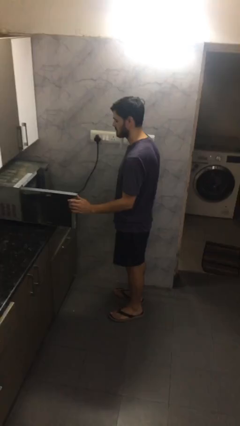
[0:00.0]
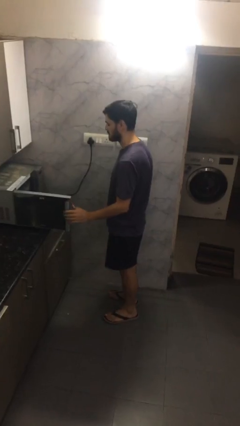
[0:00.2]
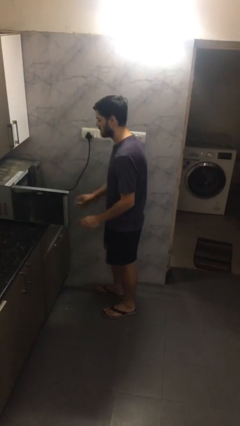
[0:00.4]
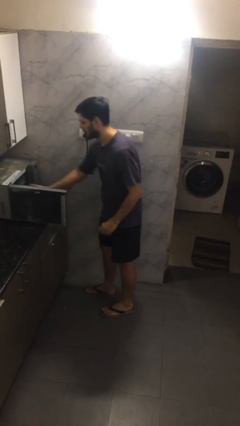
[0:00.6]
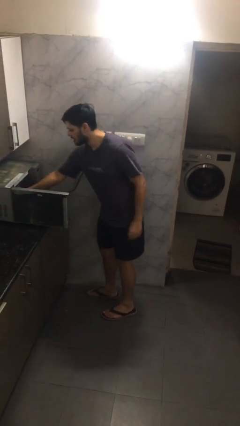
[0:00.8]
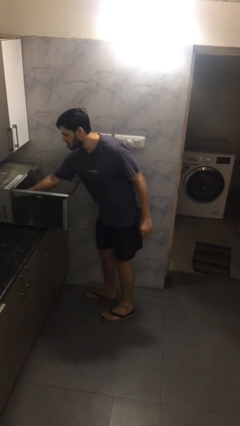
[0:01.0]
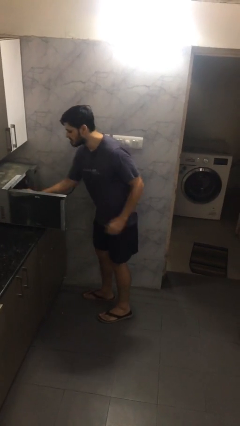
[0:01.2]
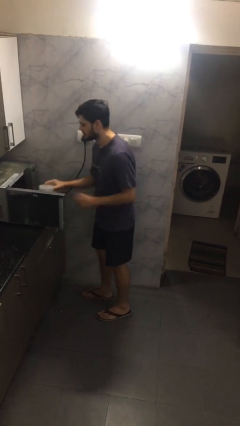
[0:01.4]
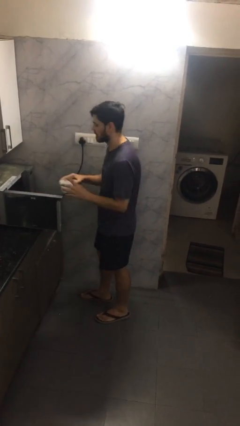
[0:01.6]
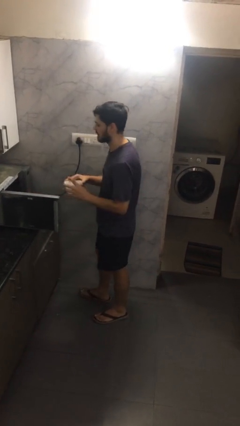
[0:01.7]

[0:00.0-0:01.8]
person takes object from microwave

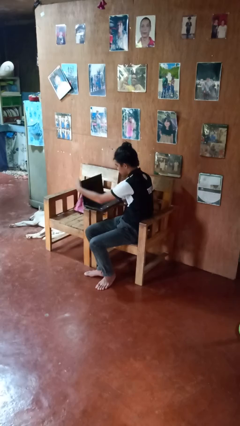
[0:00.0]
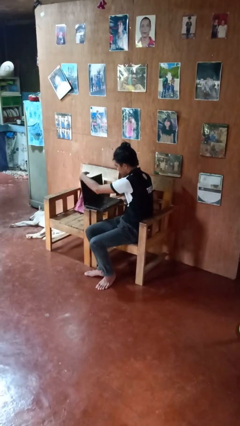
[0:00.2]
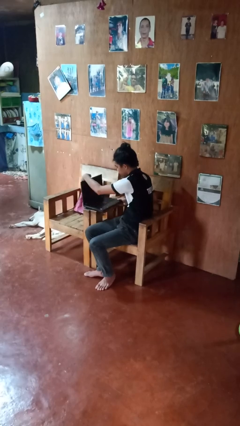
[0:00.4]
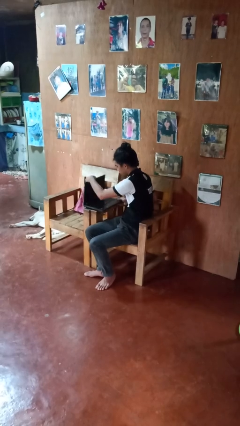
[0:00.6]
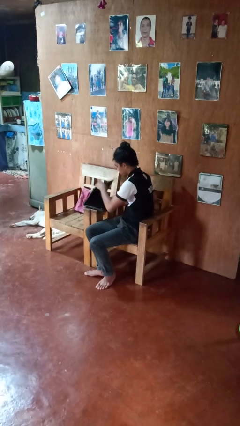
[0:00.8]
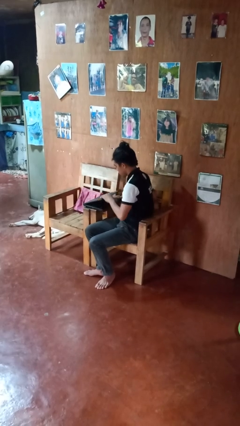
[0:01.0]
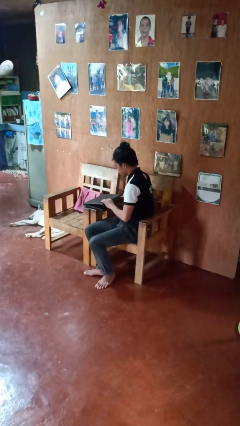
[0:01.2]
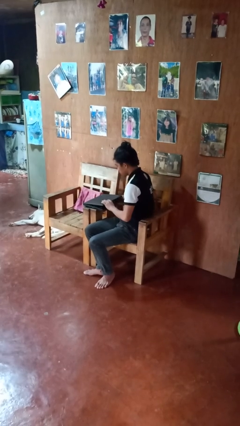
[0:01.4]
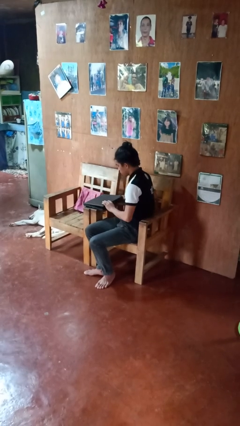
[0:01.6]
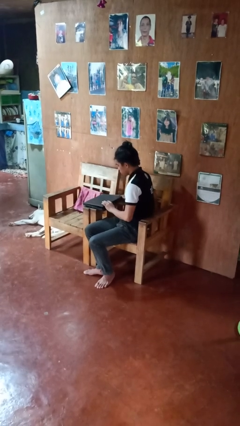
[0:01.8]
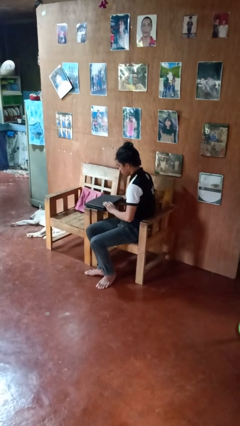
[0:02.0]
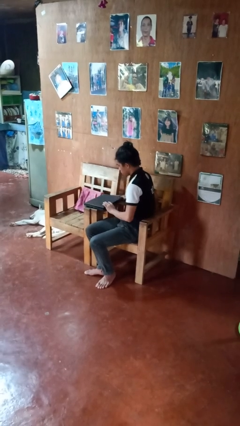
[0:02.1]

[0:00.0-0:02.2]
person closes laptop

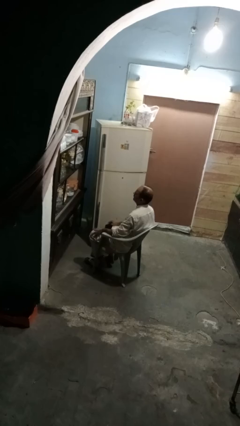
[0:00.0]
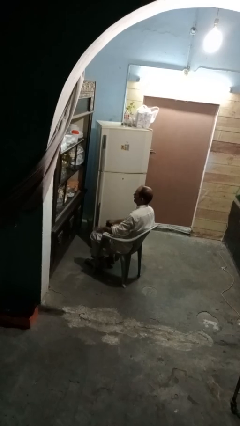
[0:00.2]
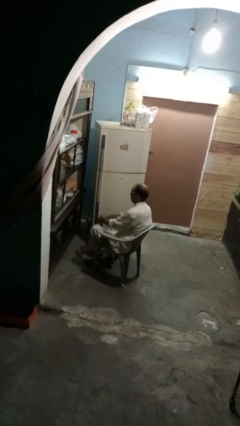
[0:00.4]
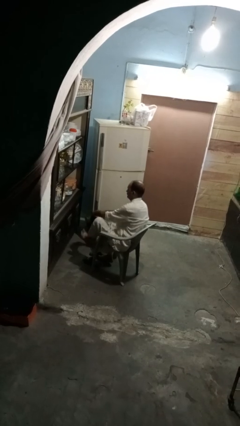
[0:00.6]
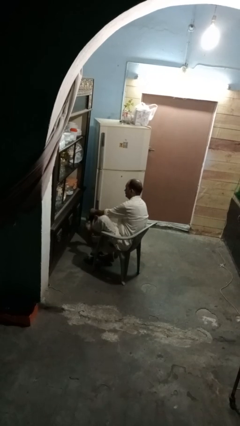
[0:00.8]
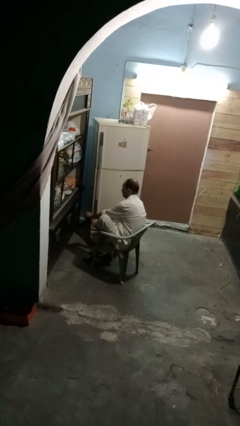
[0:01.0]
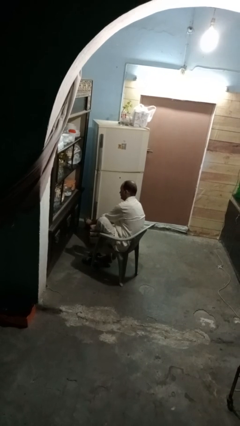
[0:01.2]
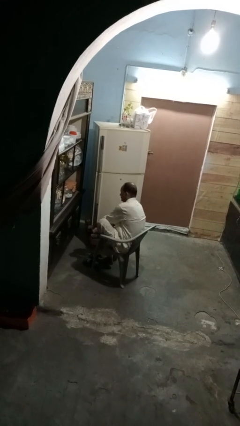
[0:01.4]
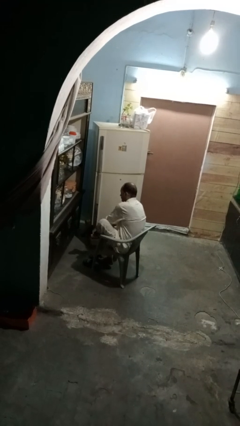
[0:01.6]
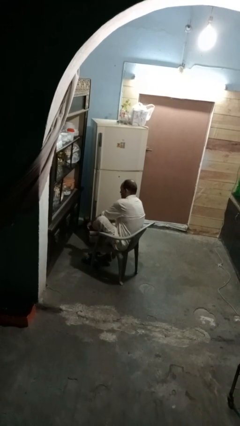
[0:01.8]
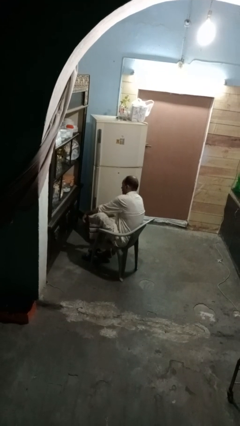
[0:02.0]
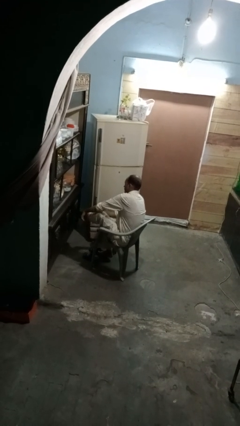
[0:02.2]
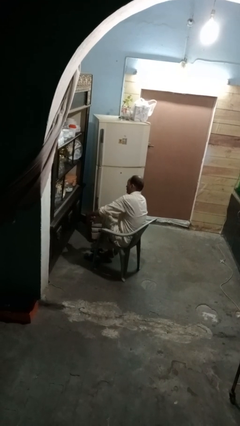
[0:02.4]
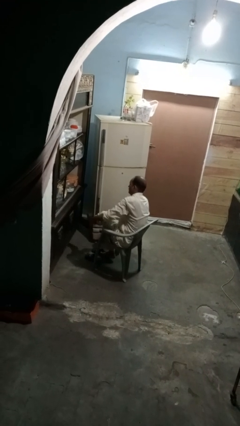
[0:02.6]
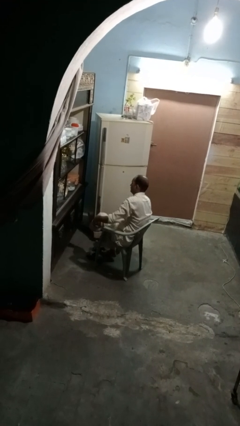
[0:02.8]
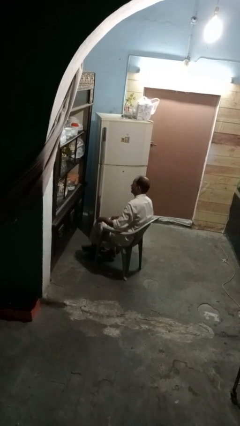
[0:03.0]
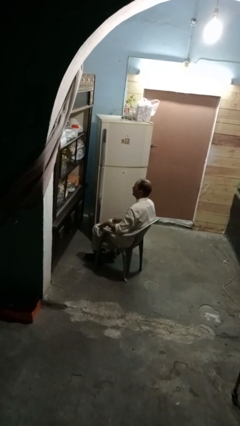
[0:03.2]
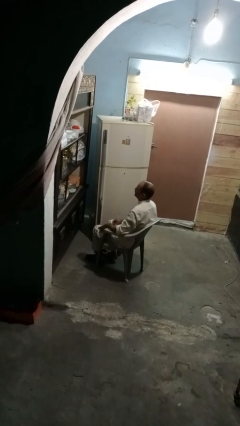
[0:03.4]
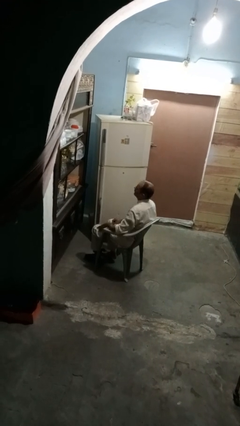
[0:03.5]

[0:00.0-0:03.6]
person puts on socks

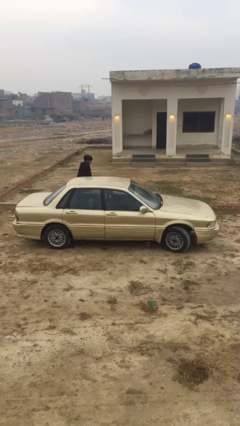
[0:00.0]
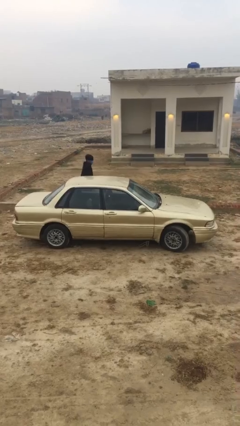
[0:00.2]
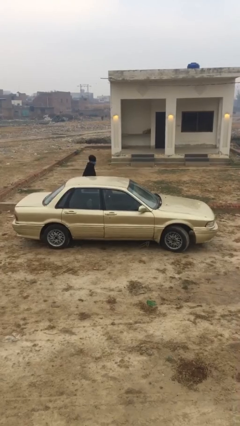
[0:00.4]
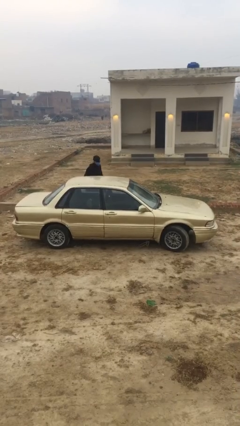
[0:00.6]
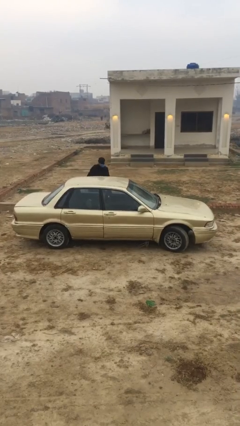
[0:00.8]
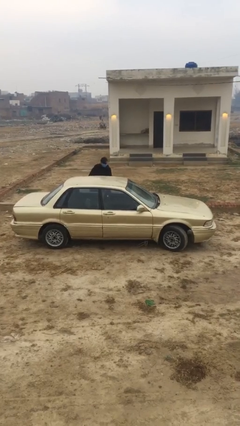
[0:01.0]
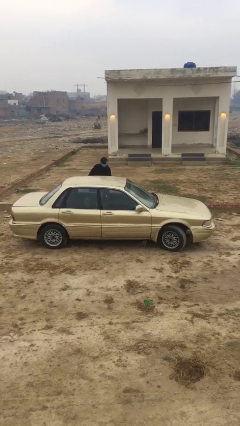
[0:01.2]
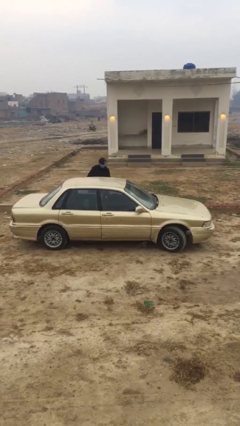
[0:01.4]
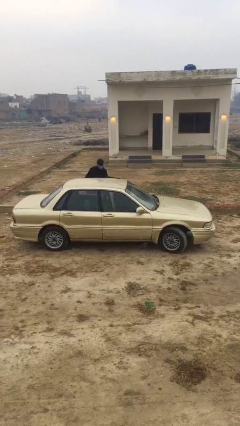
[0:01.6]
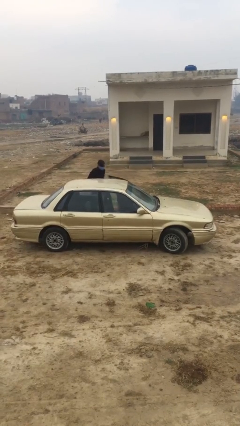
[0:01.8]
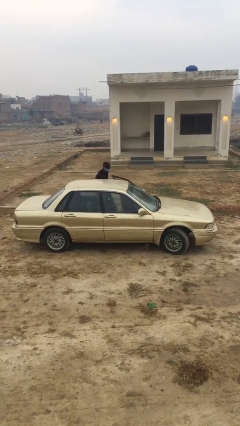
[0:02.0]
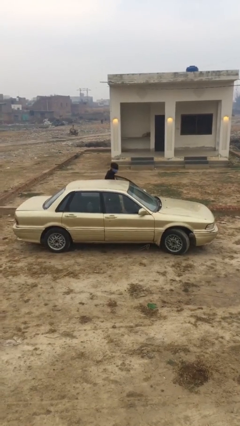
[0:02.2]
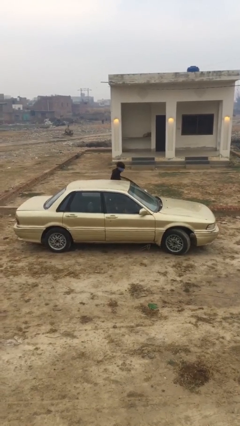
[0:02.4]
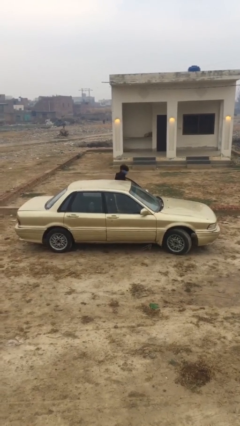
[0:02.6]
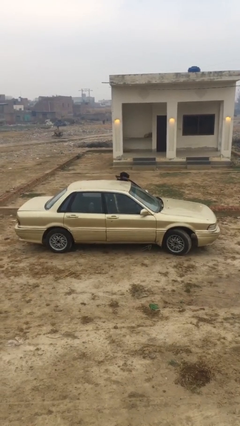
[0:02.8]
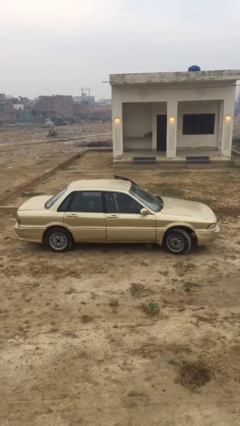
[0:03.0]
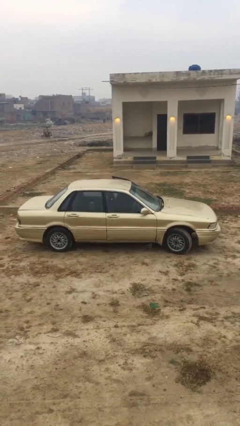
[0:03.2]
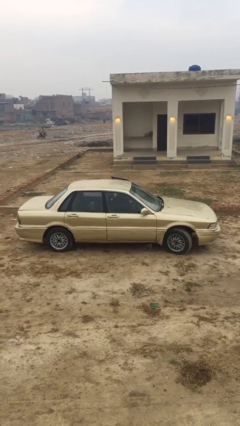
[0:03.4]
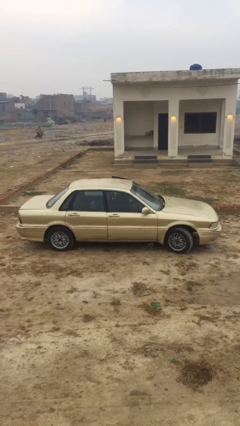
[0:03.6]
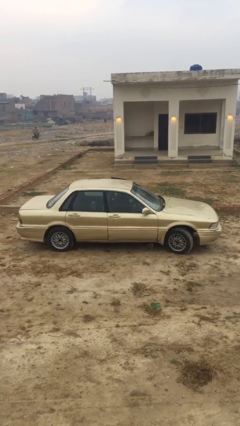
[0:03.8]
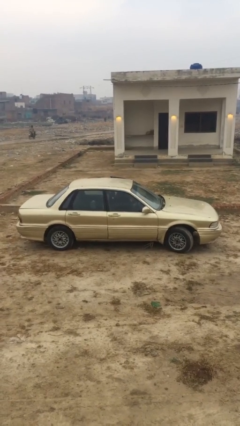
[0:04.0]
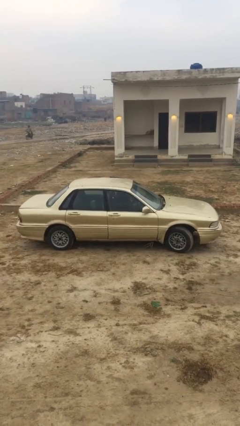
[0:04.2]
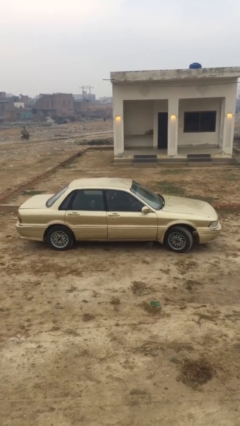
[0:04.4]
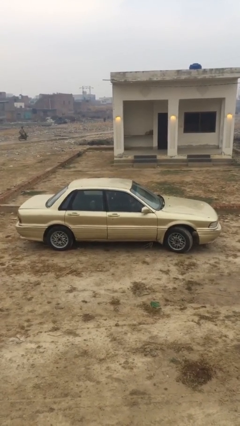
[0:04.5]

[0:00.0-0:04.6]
car picks up person

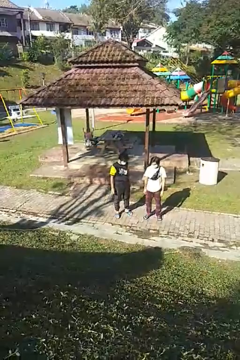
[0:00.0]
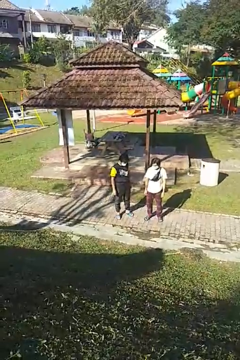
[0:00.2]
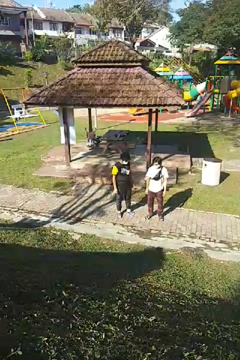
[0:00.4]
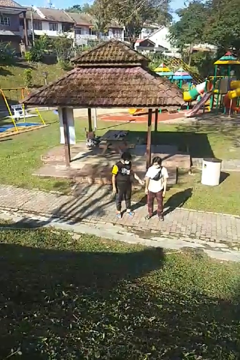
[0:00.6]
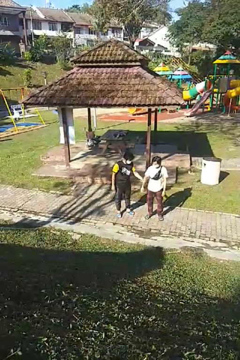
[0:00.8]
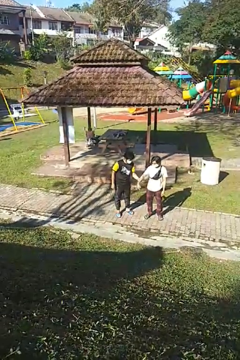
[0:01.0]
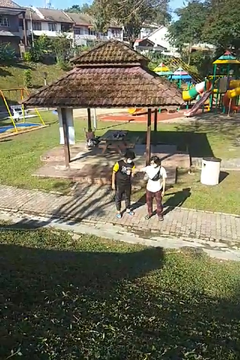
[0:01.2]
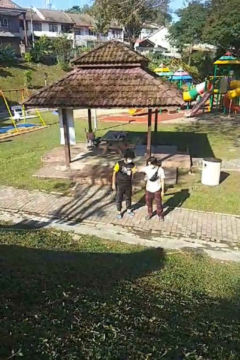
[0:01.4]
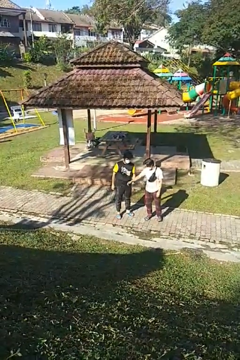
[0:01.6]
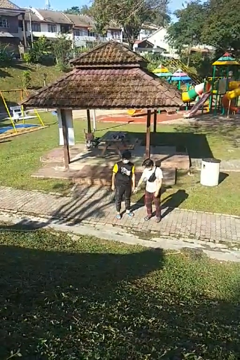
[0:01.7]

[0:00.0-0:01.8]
person grabs person by forearm

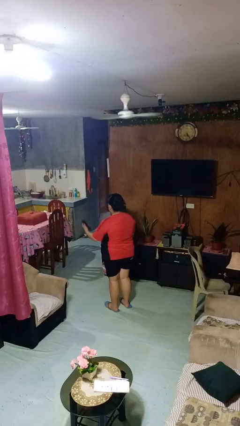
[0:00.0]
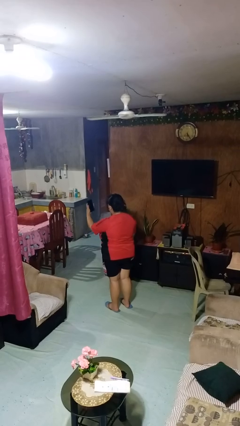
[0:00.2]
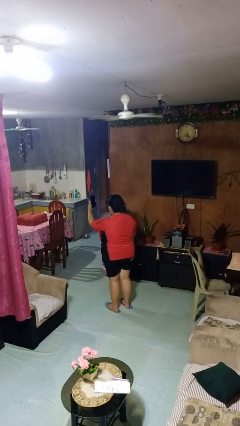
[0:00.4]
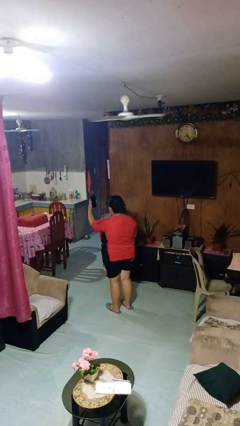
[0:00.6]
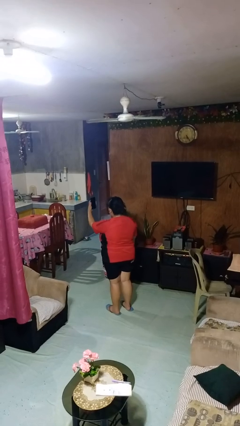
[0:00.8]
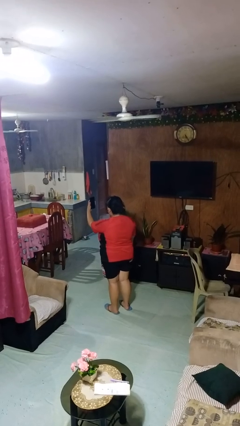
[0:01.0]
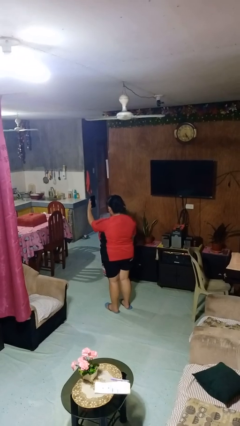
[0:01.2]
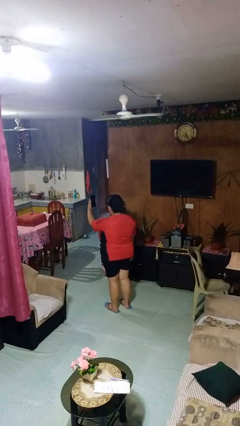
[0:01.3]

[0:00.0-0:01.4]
person takes selfie

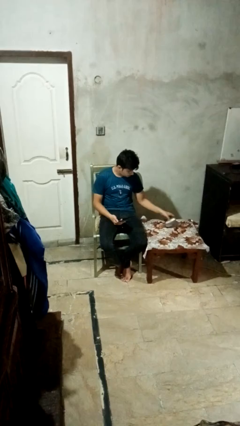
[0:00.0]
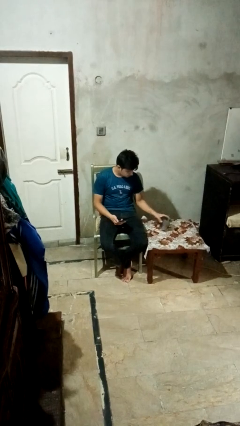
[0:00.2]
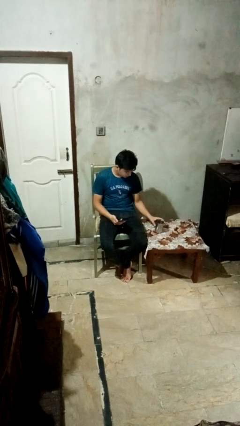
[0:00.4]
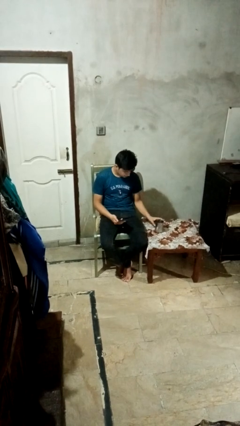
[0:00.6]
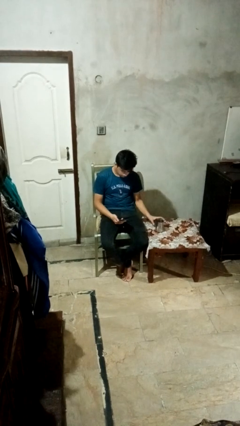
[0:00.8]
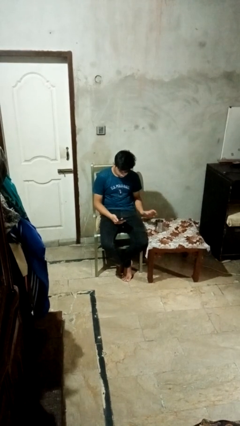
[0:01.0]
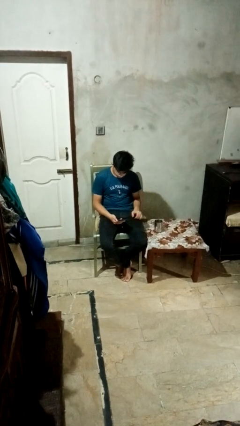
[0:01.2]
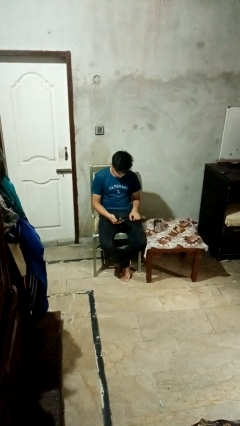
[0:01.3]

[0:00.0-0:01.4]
person sets upright glass

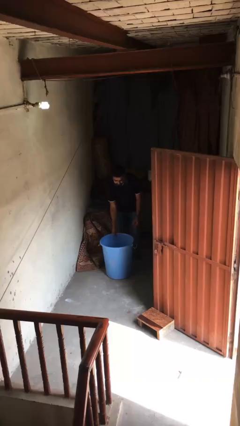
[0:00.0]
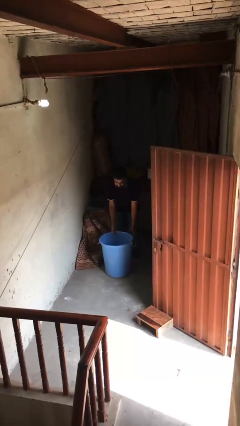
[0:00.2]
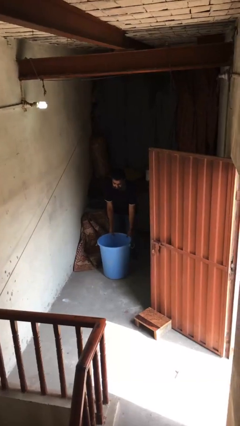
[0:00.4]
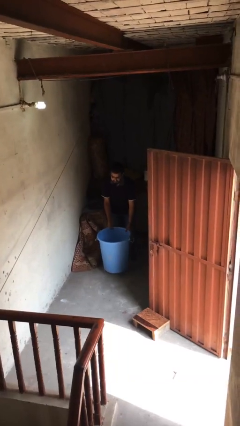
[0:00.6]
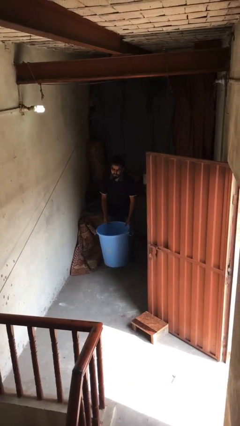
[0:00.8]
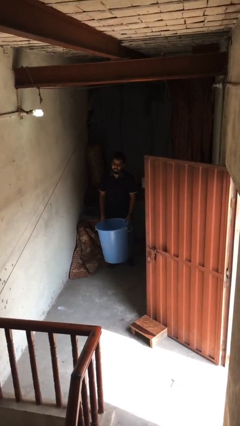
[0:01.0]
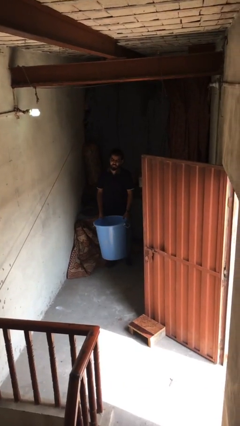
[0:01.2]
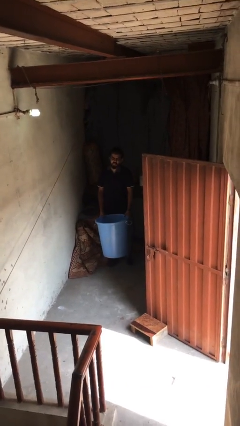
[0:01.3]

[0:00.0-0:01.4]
person picks up object from floor
